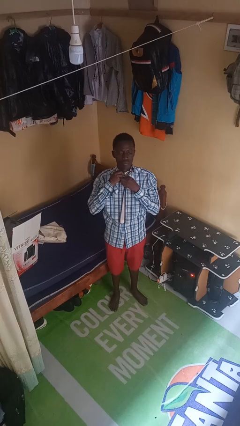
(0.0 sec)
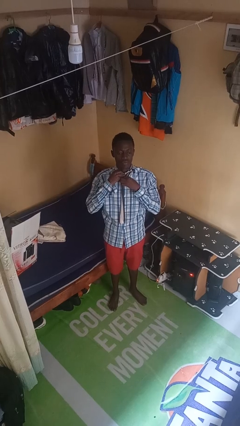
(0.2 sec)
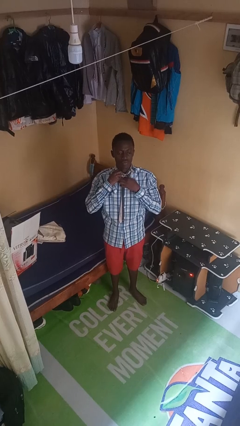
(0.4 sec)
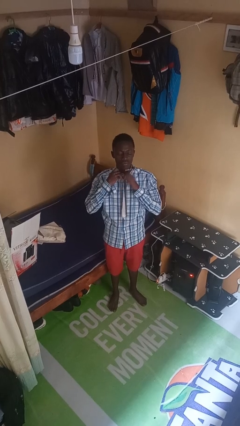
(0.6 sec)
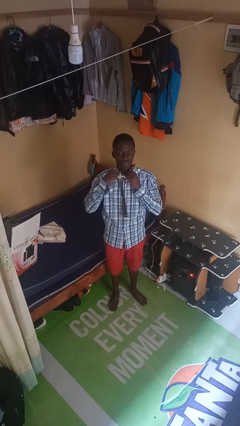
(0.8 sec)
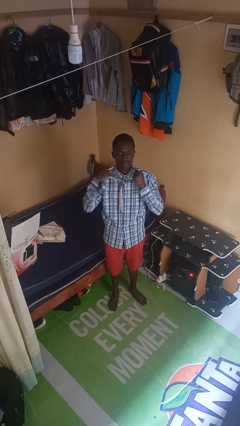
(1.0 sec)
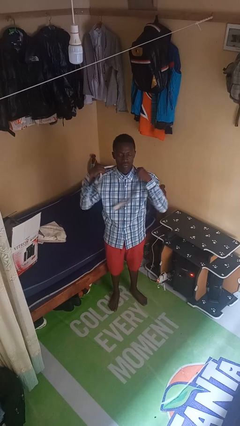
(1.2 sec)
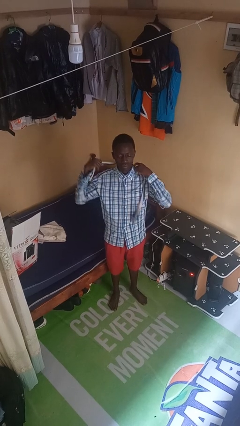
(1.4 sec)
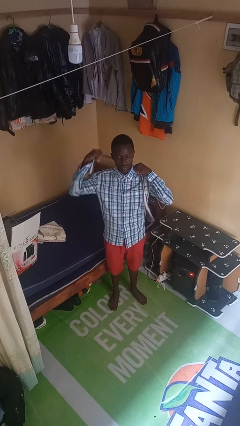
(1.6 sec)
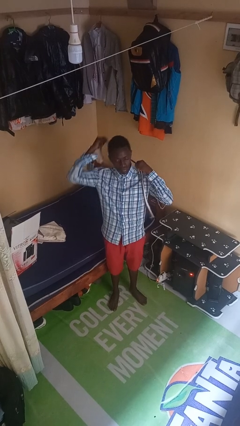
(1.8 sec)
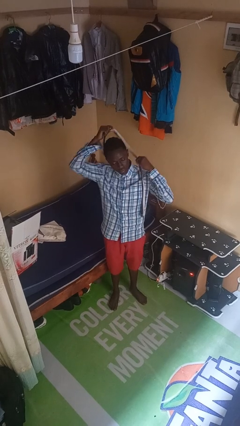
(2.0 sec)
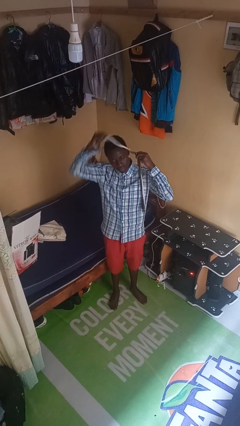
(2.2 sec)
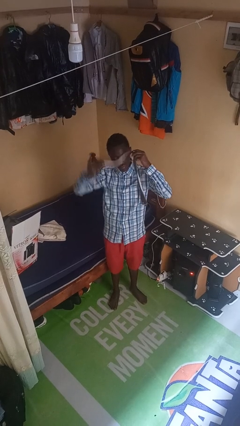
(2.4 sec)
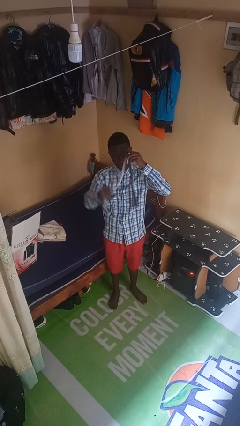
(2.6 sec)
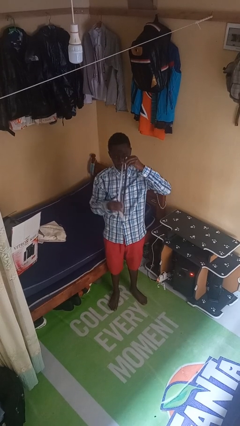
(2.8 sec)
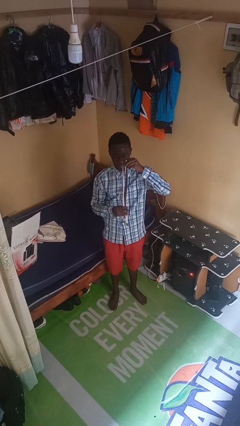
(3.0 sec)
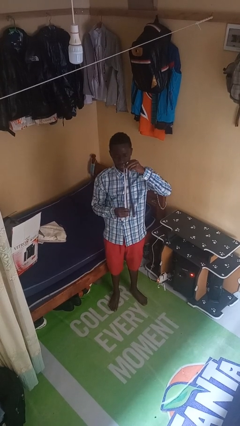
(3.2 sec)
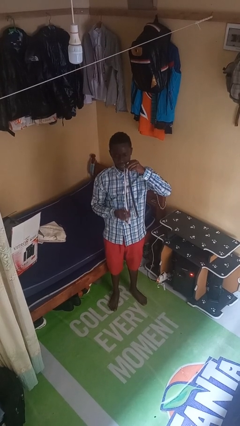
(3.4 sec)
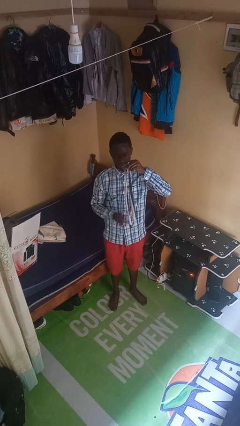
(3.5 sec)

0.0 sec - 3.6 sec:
person takes off necktie

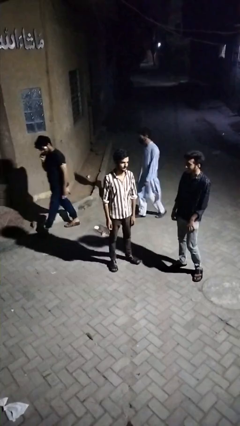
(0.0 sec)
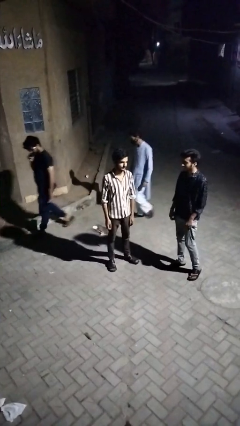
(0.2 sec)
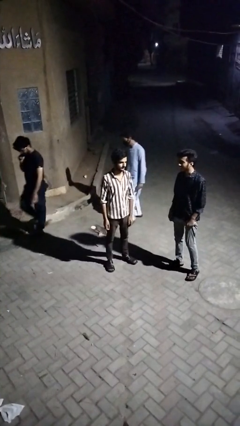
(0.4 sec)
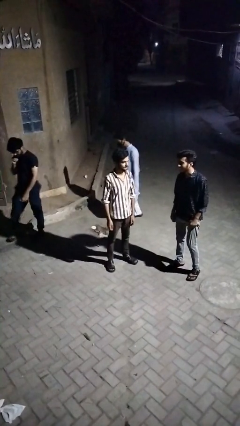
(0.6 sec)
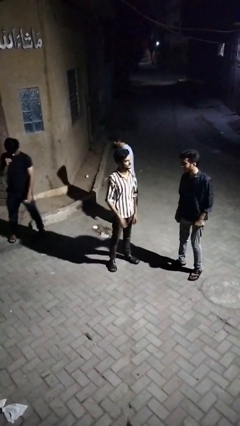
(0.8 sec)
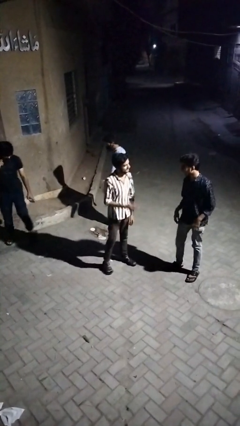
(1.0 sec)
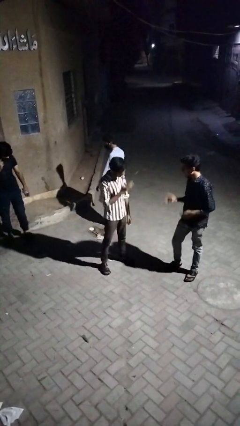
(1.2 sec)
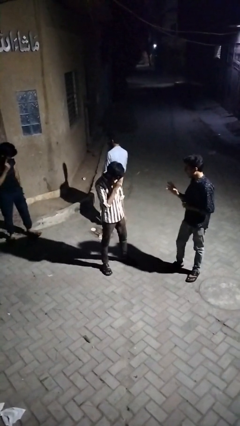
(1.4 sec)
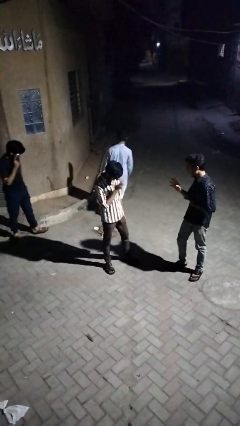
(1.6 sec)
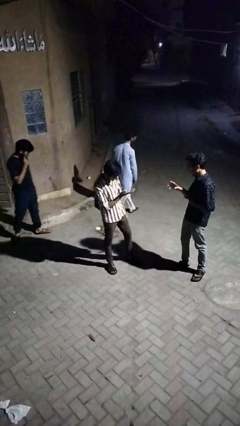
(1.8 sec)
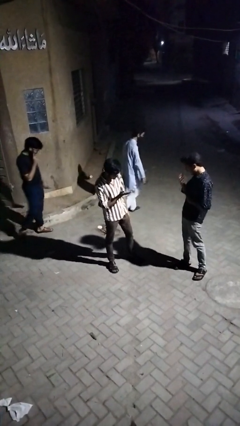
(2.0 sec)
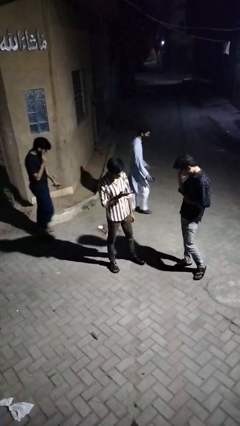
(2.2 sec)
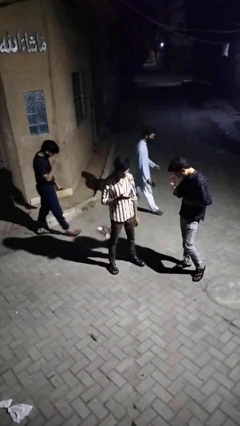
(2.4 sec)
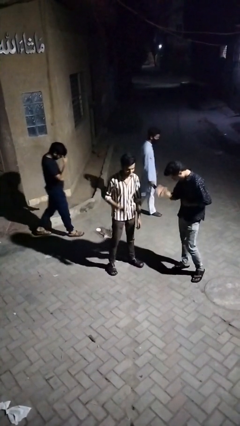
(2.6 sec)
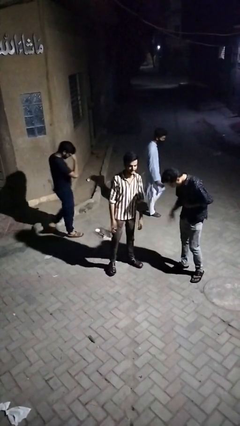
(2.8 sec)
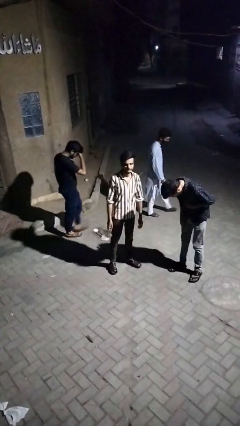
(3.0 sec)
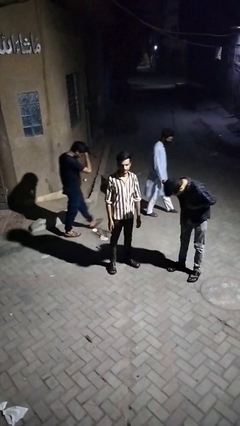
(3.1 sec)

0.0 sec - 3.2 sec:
person laughs with person

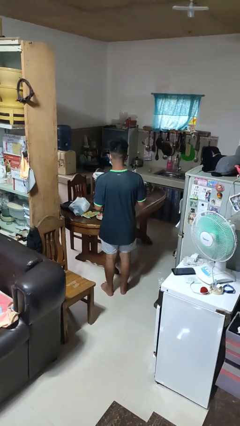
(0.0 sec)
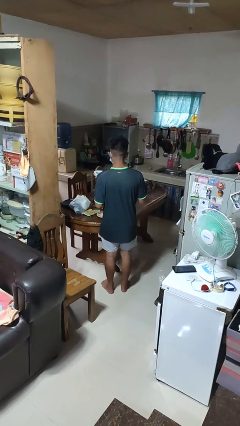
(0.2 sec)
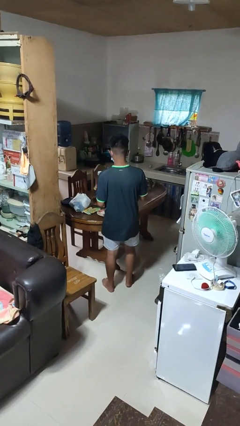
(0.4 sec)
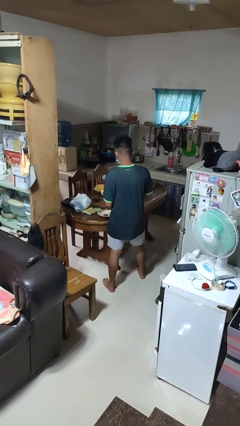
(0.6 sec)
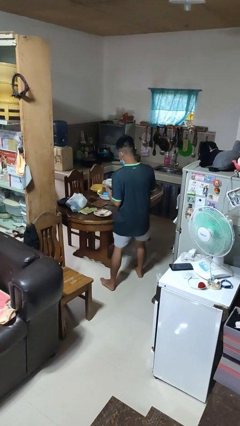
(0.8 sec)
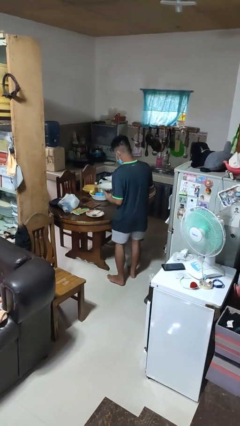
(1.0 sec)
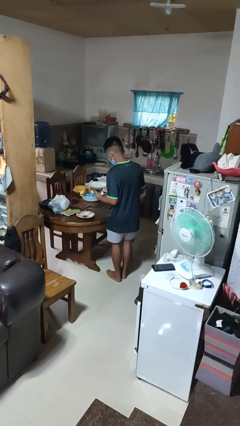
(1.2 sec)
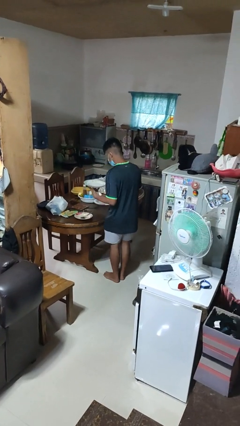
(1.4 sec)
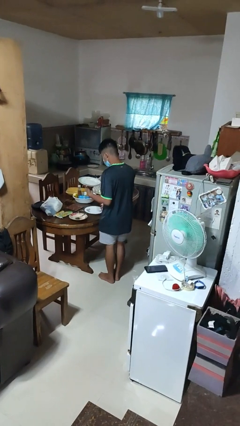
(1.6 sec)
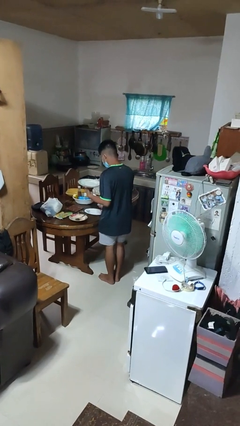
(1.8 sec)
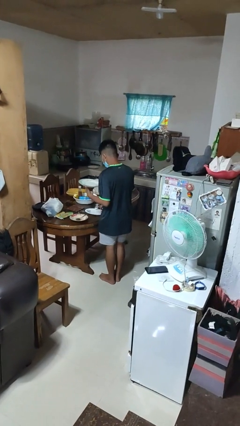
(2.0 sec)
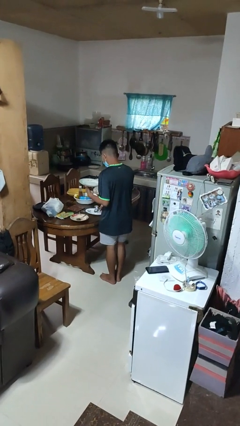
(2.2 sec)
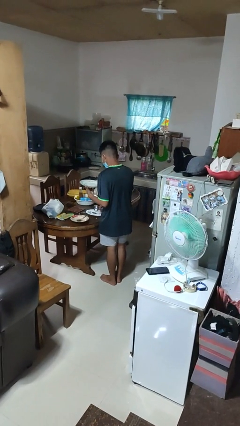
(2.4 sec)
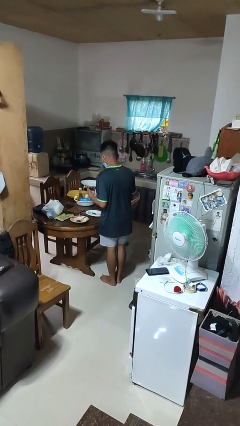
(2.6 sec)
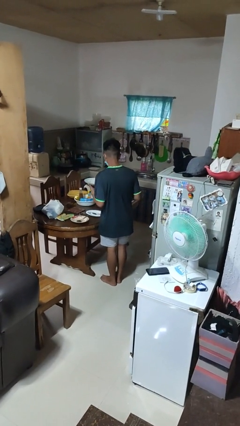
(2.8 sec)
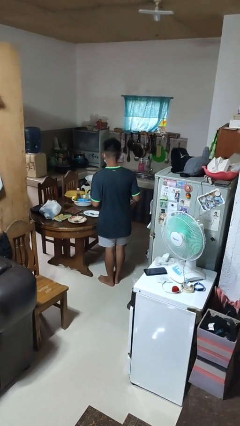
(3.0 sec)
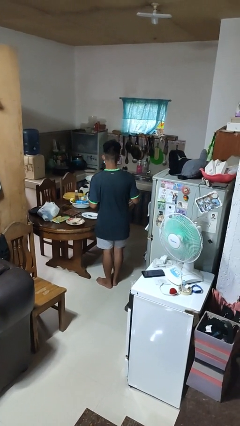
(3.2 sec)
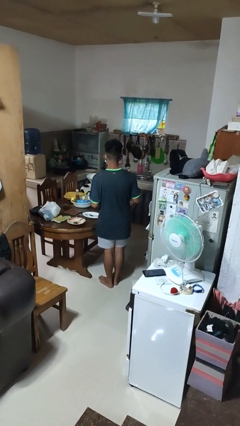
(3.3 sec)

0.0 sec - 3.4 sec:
person sets table

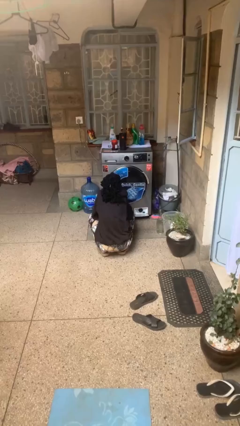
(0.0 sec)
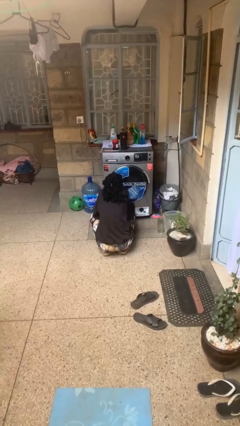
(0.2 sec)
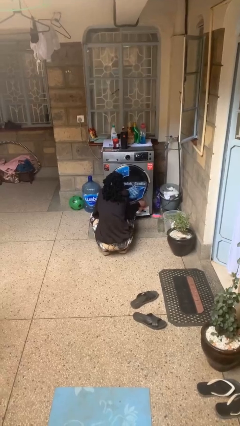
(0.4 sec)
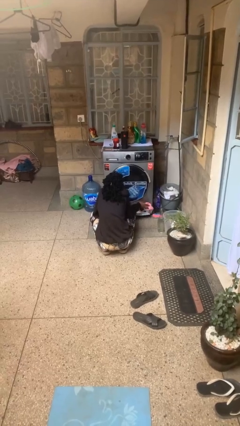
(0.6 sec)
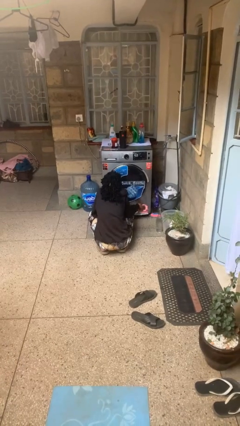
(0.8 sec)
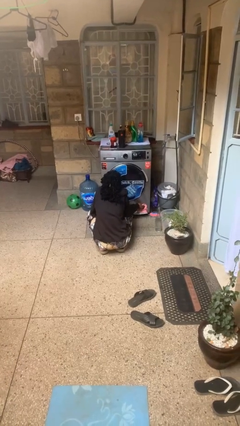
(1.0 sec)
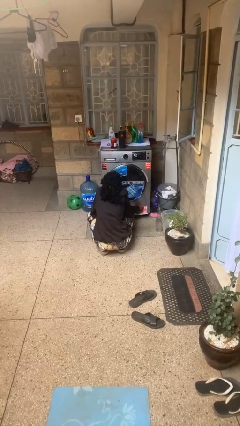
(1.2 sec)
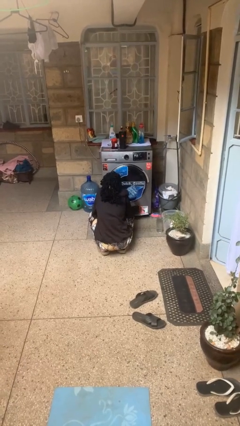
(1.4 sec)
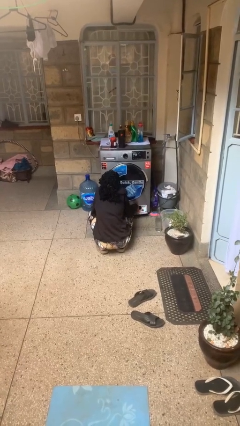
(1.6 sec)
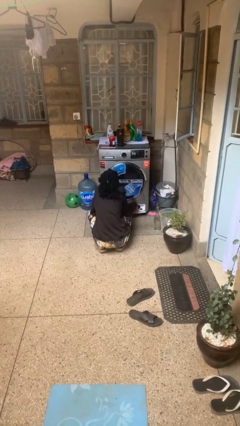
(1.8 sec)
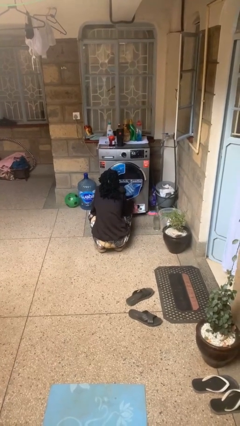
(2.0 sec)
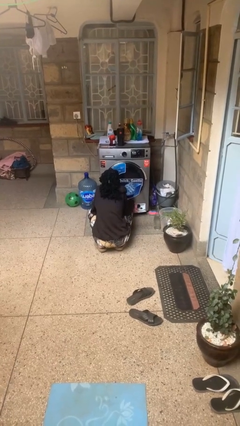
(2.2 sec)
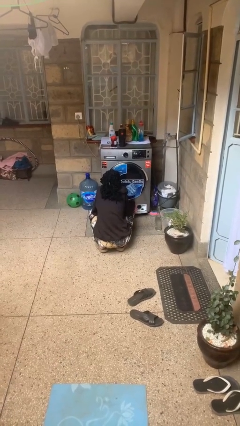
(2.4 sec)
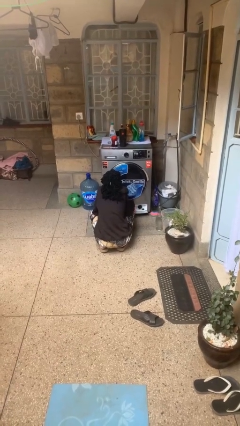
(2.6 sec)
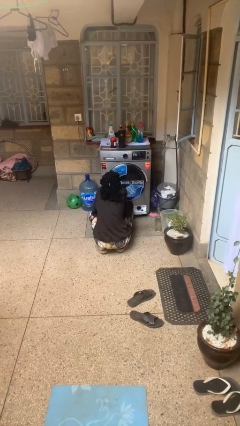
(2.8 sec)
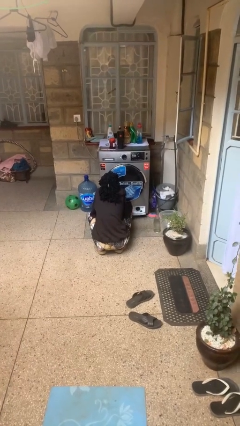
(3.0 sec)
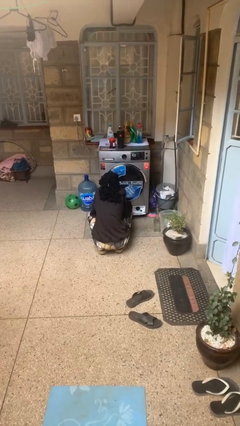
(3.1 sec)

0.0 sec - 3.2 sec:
person cleans dryer lint trap

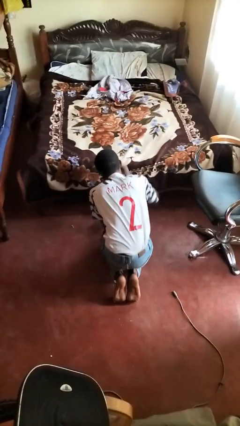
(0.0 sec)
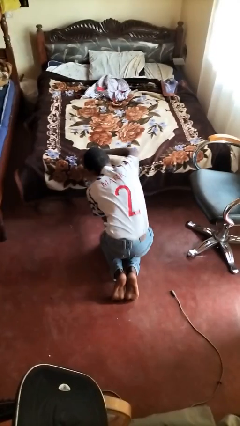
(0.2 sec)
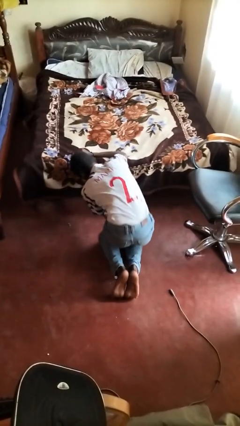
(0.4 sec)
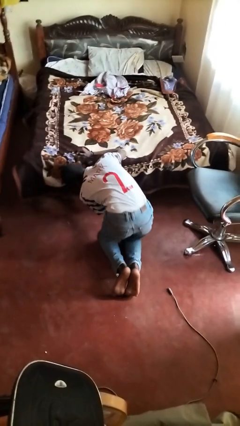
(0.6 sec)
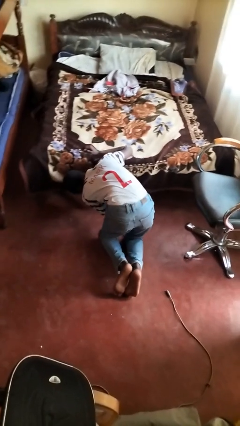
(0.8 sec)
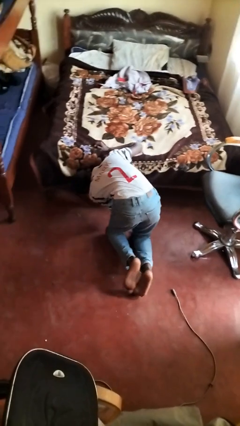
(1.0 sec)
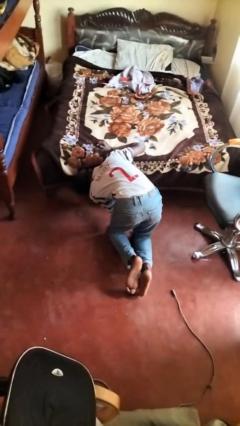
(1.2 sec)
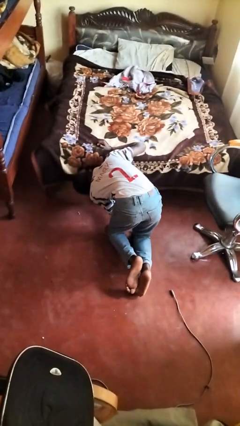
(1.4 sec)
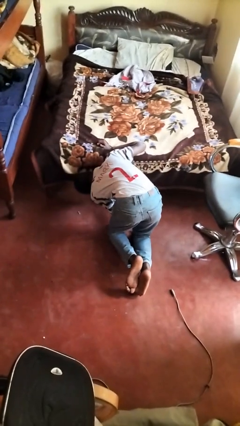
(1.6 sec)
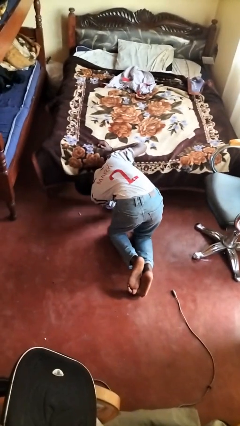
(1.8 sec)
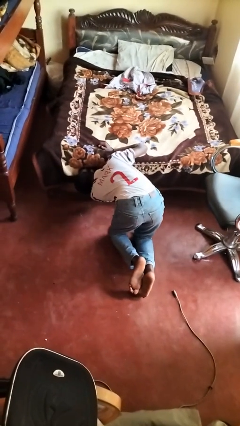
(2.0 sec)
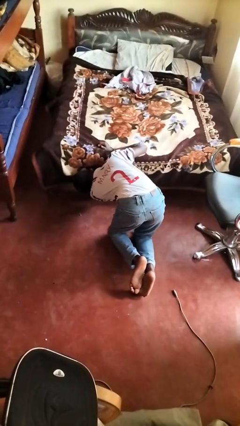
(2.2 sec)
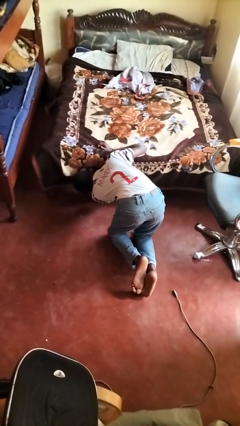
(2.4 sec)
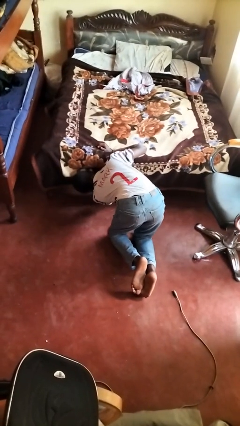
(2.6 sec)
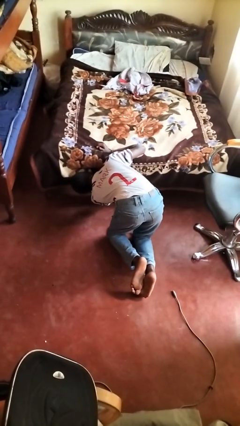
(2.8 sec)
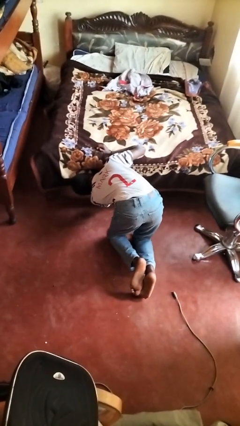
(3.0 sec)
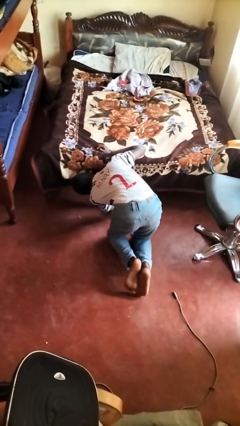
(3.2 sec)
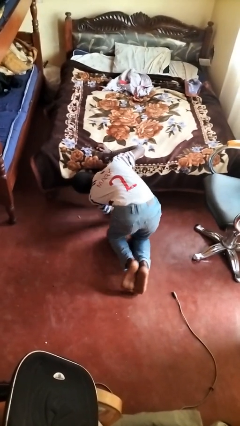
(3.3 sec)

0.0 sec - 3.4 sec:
person searches under bed

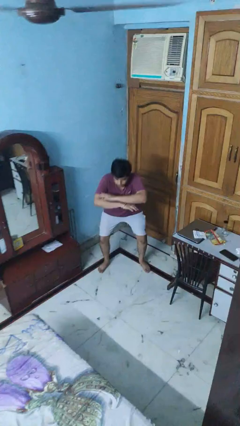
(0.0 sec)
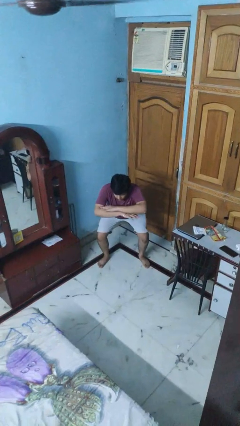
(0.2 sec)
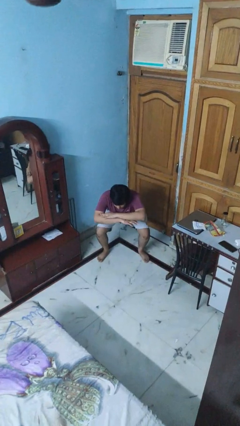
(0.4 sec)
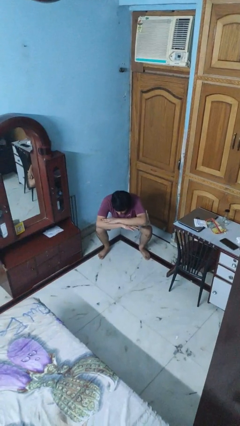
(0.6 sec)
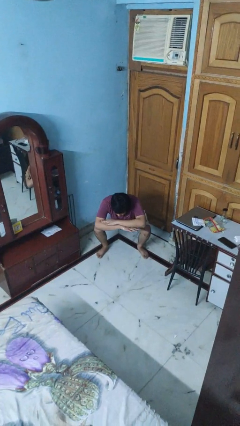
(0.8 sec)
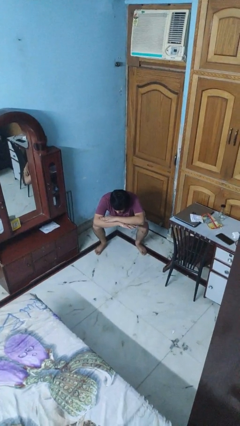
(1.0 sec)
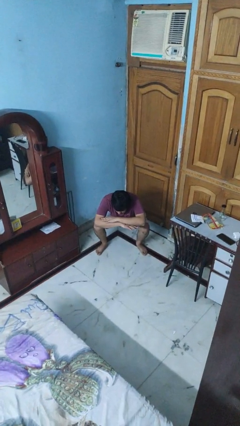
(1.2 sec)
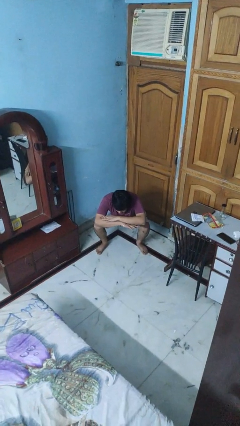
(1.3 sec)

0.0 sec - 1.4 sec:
person squats
